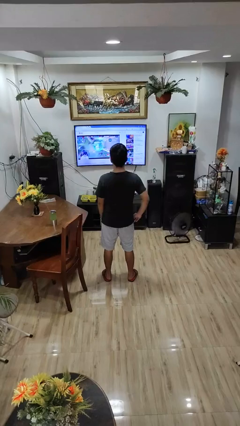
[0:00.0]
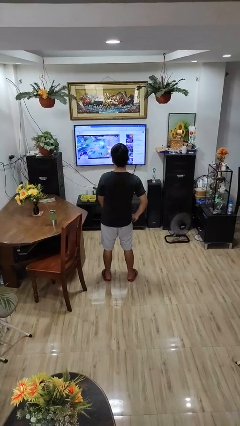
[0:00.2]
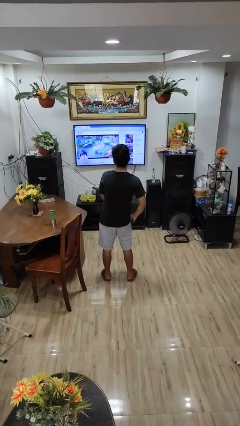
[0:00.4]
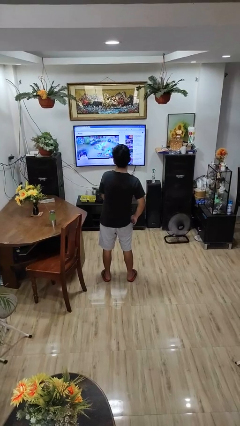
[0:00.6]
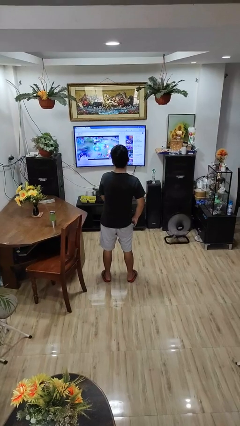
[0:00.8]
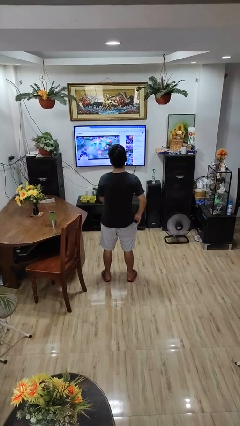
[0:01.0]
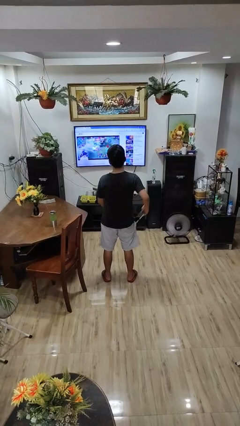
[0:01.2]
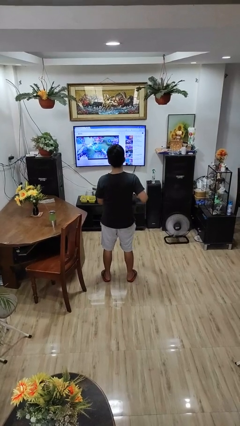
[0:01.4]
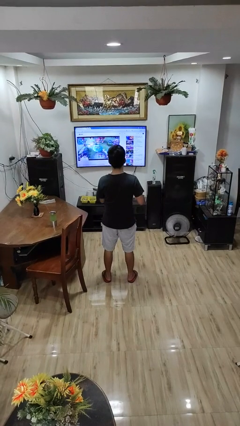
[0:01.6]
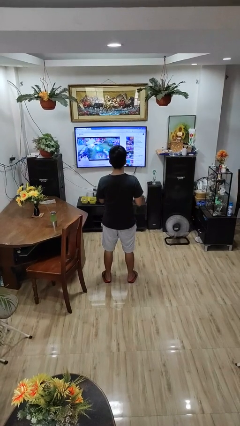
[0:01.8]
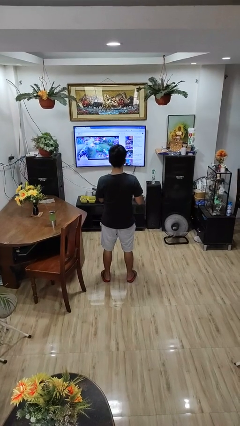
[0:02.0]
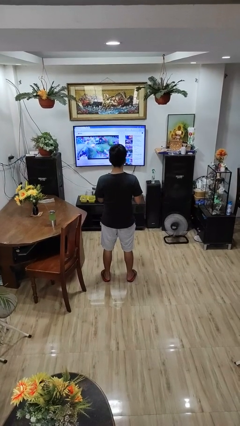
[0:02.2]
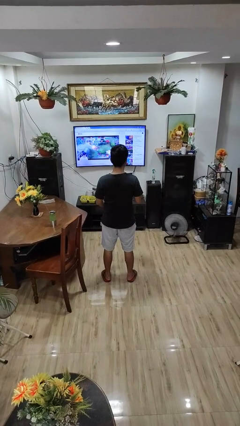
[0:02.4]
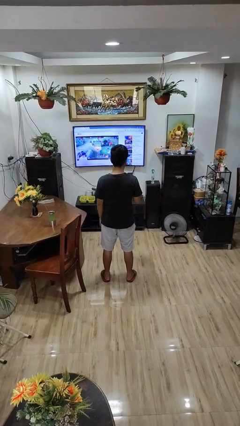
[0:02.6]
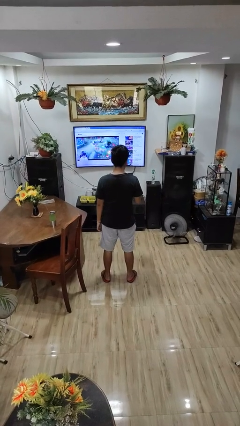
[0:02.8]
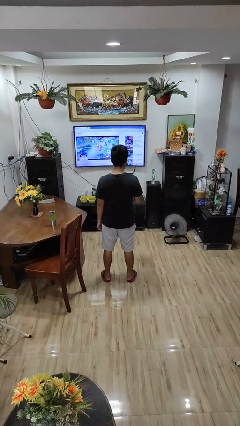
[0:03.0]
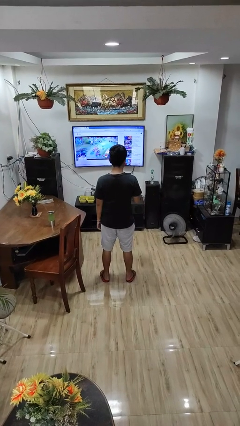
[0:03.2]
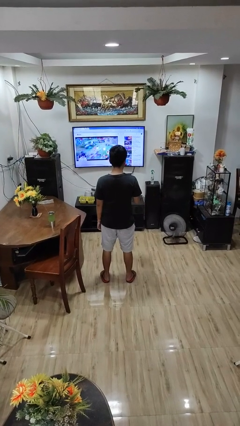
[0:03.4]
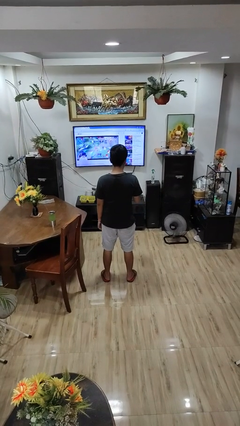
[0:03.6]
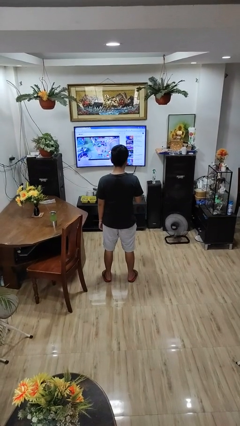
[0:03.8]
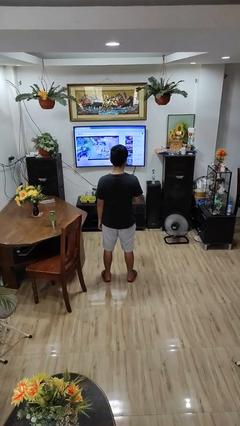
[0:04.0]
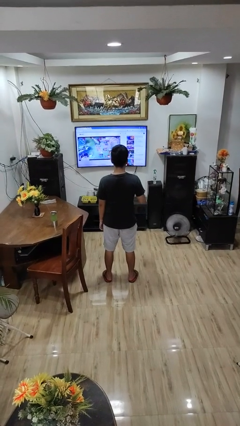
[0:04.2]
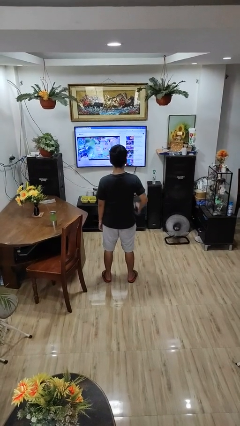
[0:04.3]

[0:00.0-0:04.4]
person takes phone from pocket

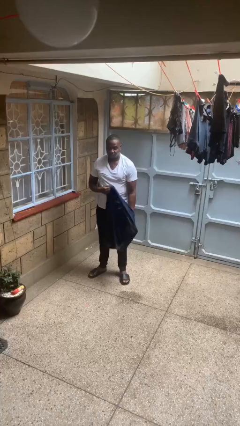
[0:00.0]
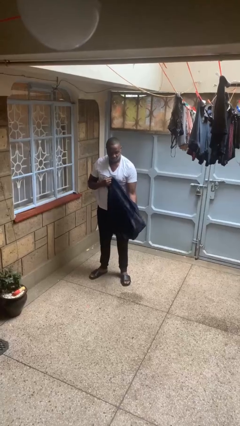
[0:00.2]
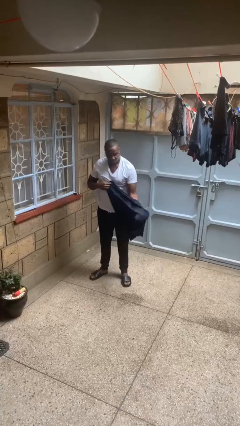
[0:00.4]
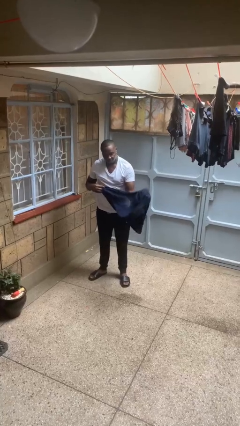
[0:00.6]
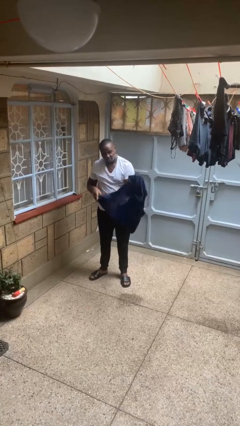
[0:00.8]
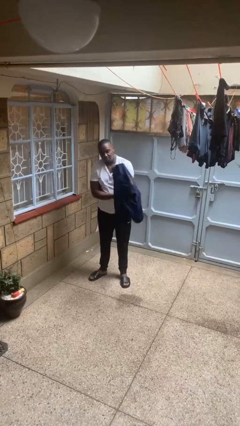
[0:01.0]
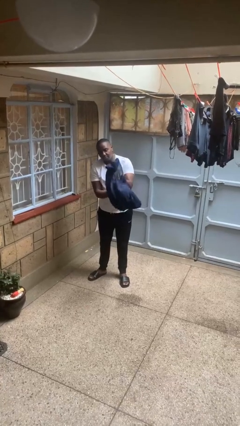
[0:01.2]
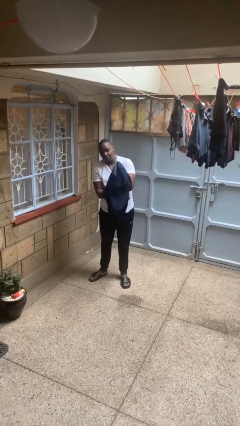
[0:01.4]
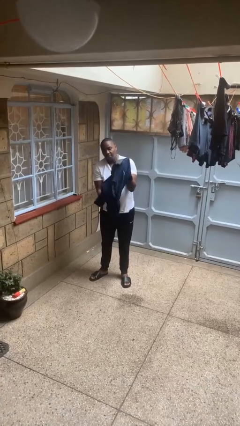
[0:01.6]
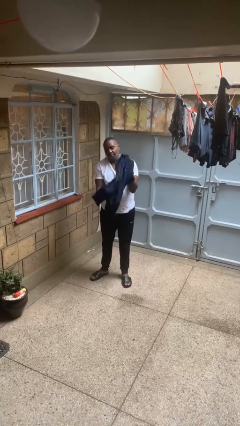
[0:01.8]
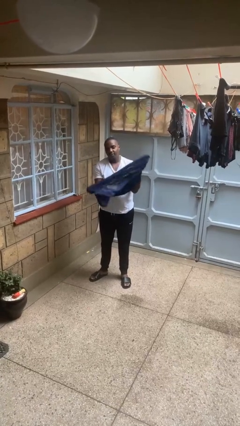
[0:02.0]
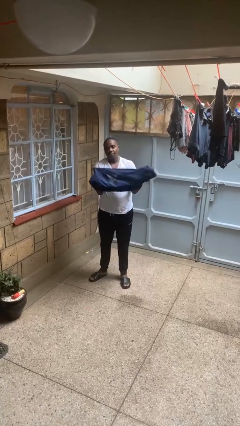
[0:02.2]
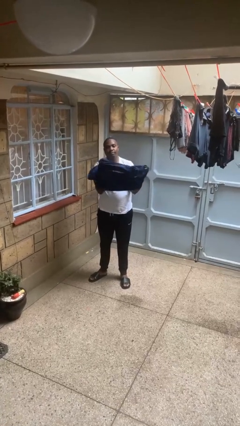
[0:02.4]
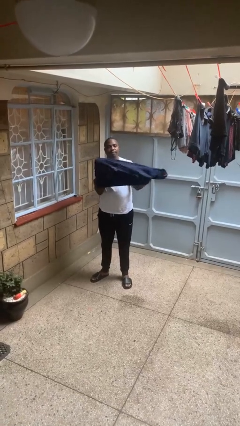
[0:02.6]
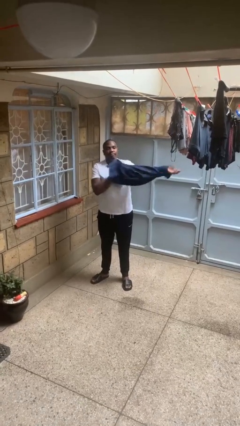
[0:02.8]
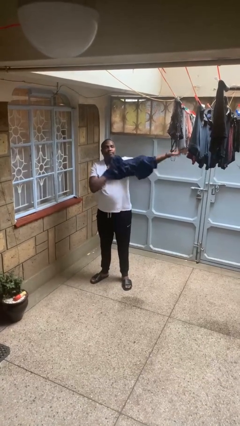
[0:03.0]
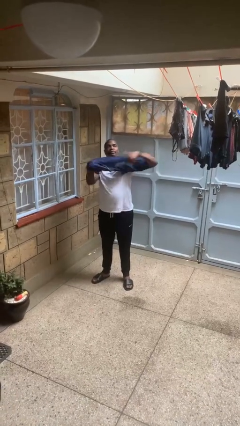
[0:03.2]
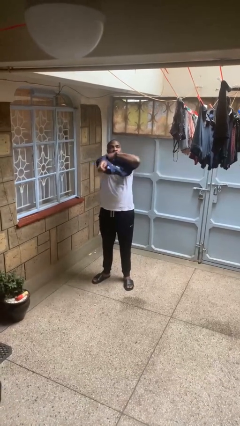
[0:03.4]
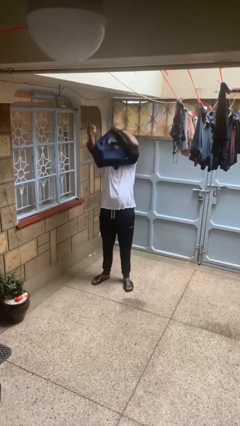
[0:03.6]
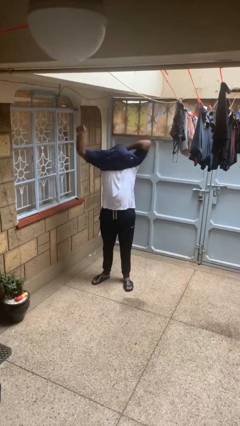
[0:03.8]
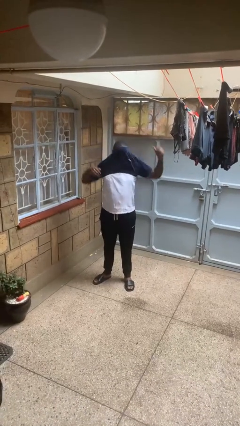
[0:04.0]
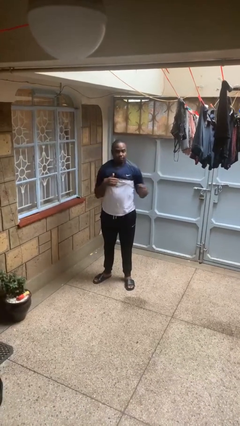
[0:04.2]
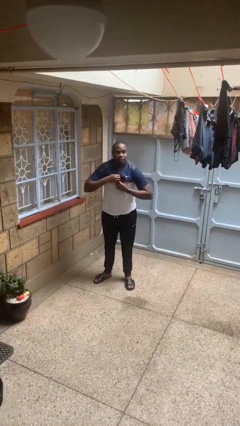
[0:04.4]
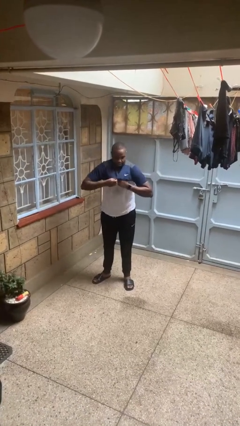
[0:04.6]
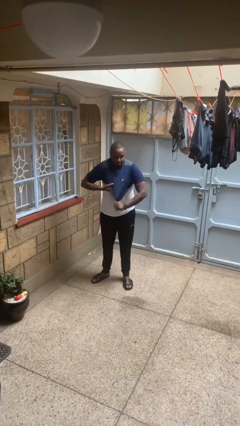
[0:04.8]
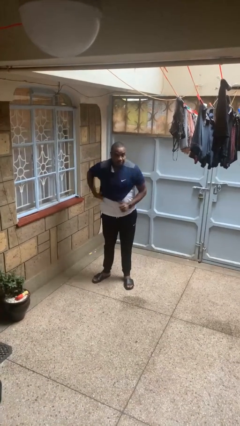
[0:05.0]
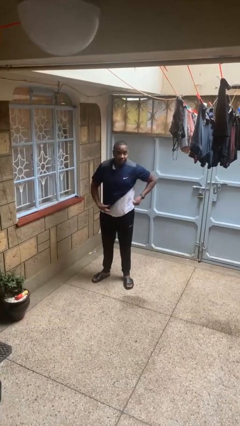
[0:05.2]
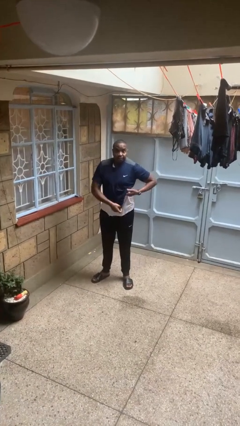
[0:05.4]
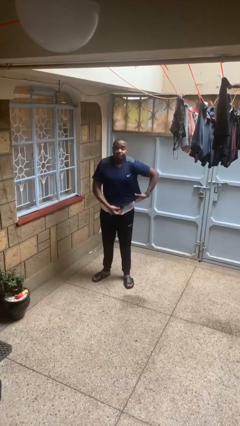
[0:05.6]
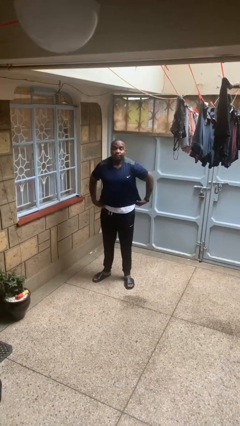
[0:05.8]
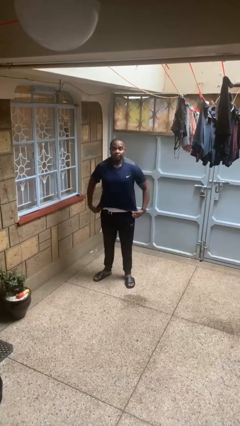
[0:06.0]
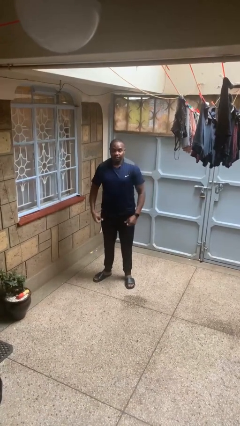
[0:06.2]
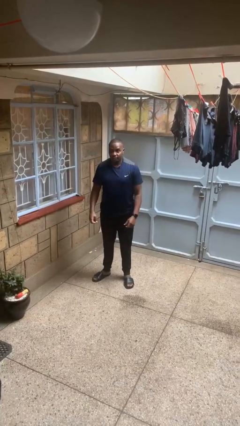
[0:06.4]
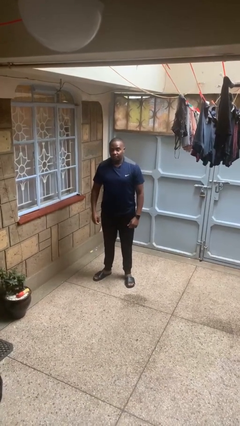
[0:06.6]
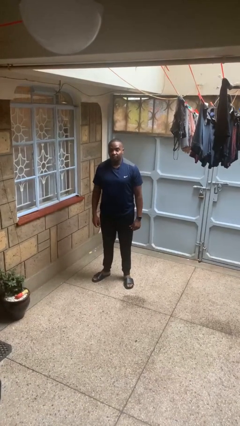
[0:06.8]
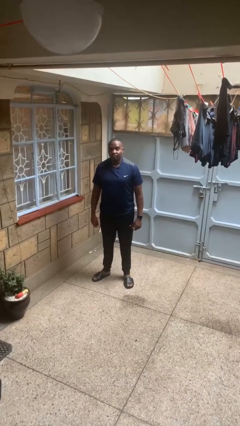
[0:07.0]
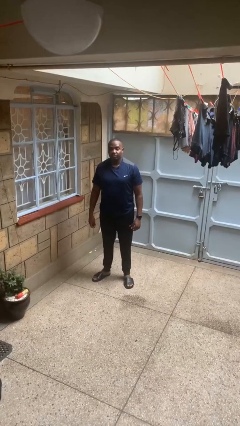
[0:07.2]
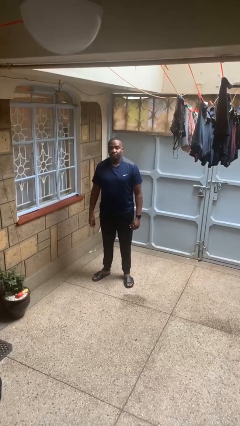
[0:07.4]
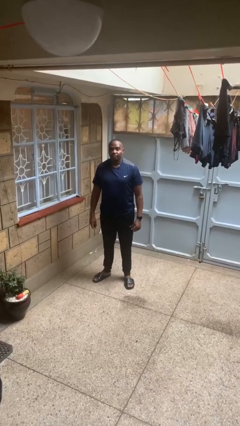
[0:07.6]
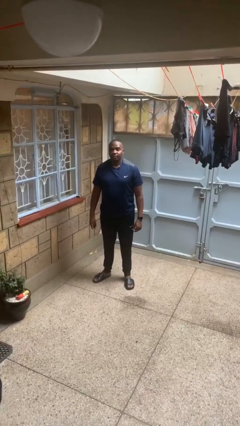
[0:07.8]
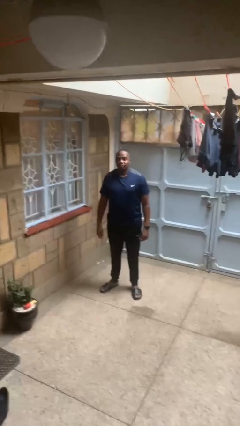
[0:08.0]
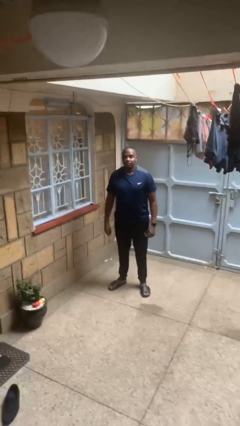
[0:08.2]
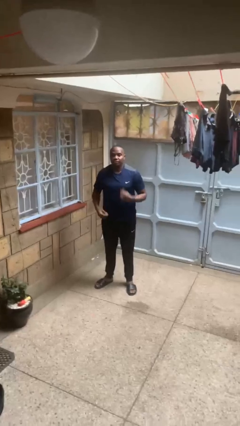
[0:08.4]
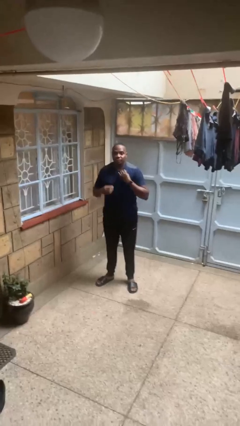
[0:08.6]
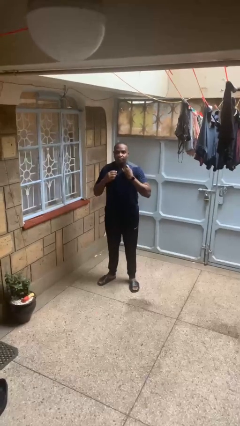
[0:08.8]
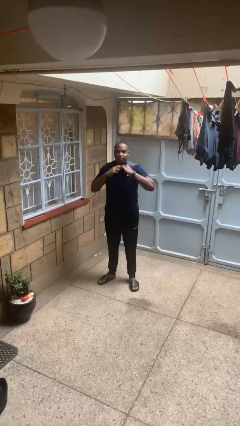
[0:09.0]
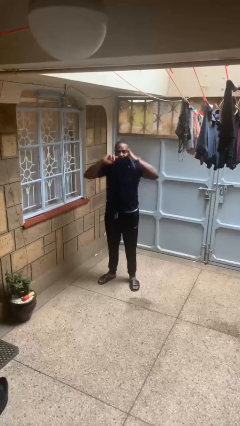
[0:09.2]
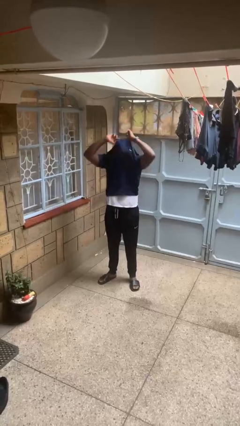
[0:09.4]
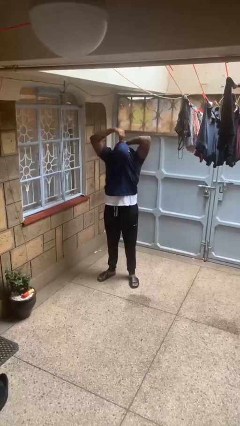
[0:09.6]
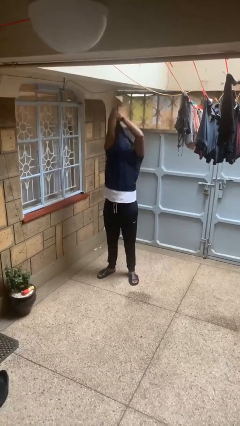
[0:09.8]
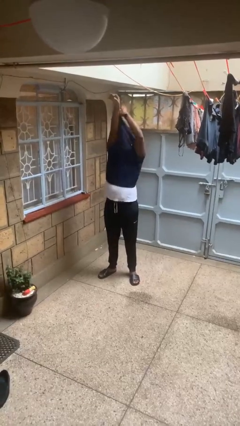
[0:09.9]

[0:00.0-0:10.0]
person puts on shirt

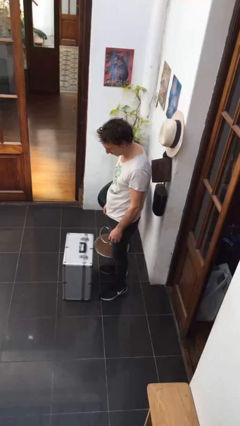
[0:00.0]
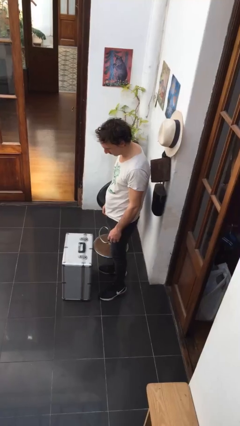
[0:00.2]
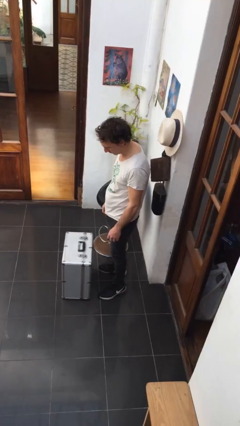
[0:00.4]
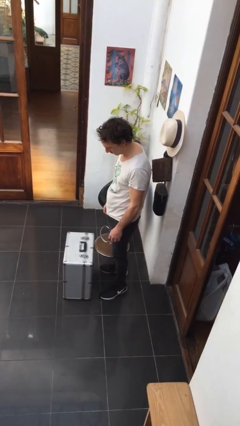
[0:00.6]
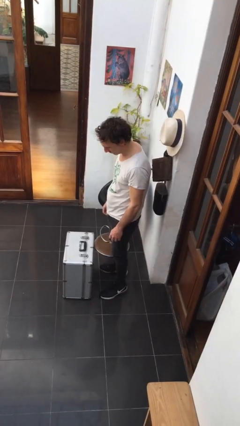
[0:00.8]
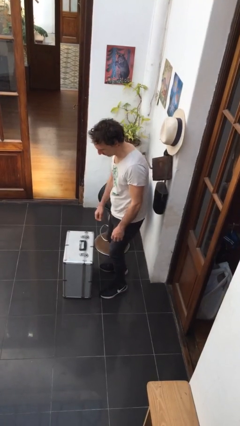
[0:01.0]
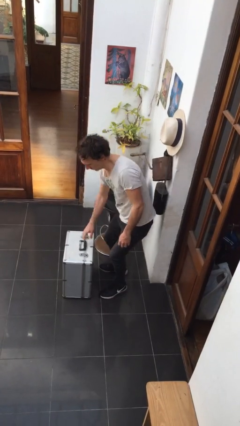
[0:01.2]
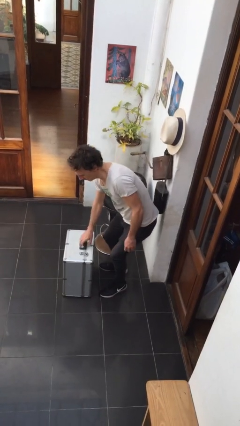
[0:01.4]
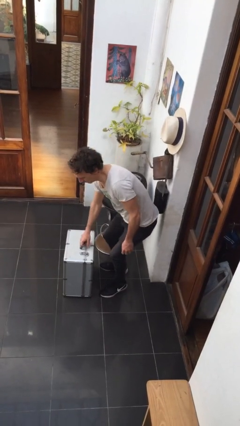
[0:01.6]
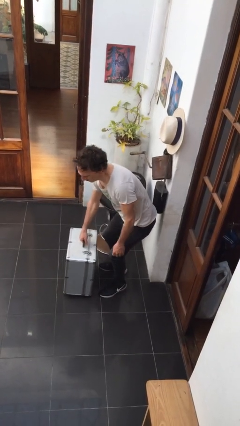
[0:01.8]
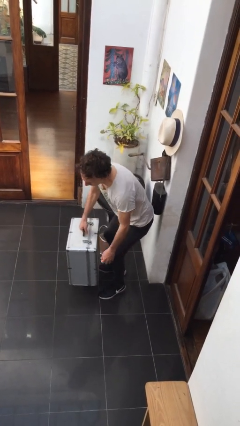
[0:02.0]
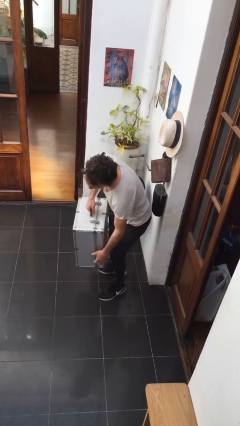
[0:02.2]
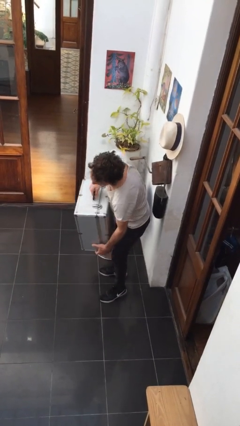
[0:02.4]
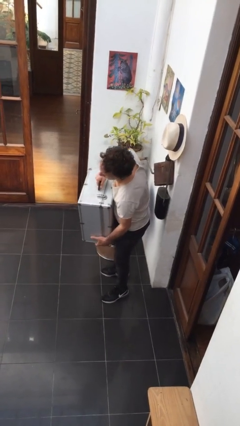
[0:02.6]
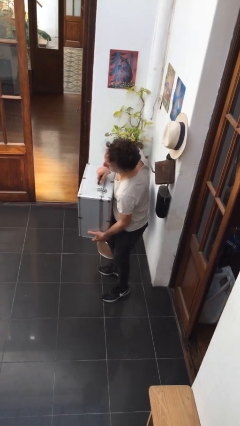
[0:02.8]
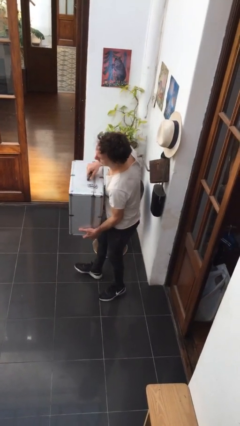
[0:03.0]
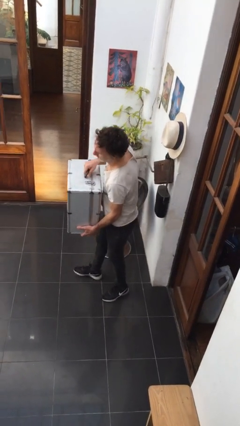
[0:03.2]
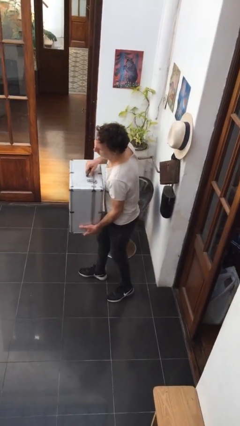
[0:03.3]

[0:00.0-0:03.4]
person picks up object from floor

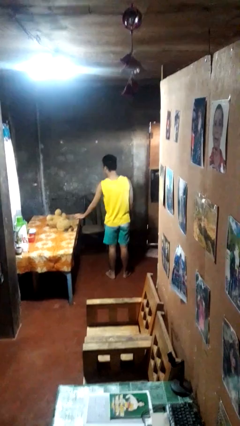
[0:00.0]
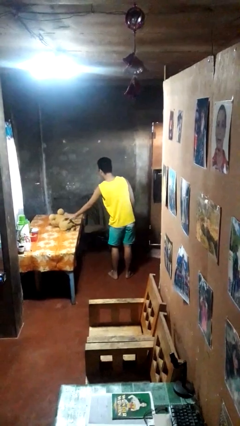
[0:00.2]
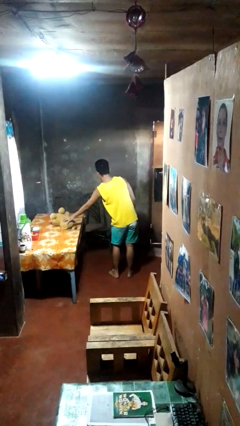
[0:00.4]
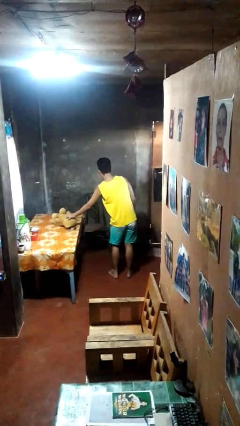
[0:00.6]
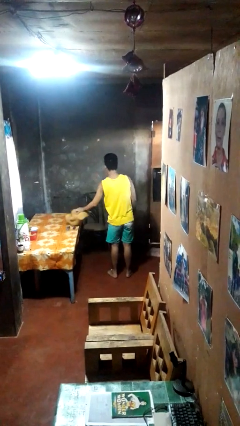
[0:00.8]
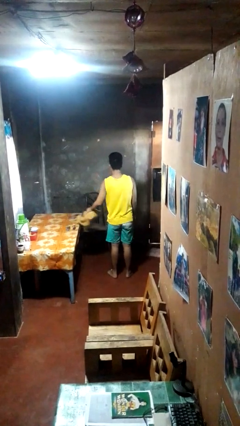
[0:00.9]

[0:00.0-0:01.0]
person picks up object from table
